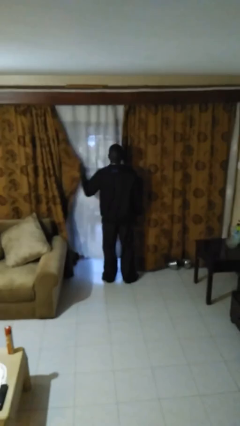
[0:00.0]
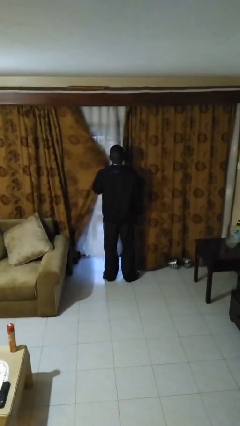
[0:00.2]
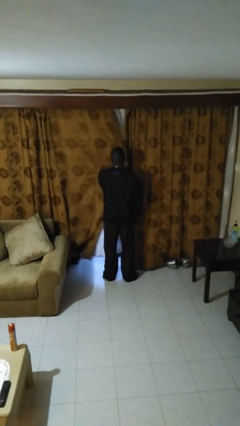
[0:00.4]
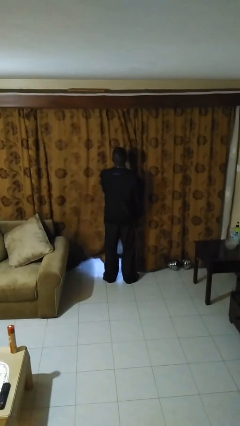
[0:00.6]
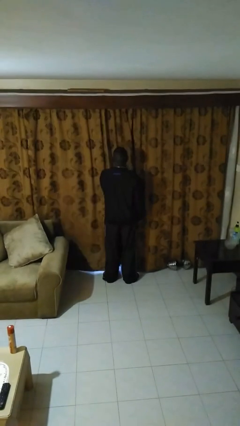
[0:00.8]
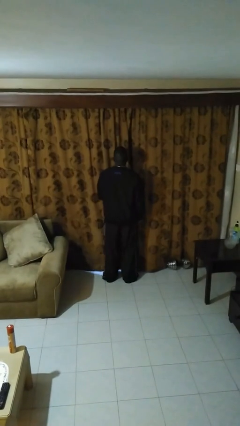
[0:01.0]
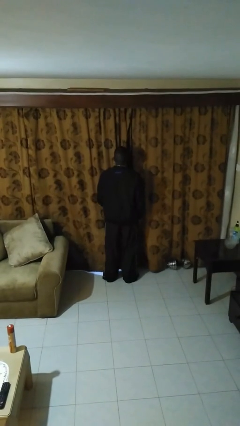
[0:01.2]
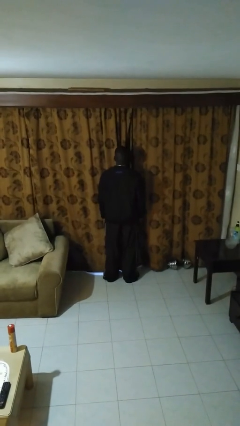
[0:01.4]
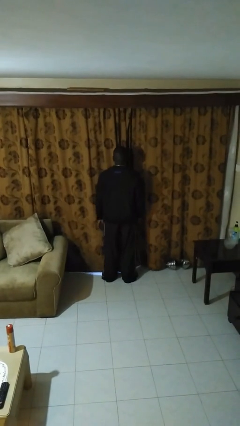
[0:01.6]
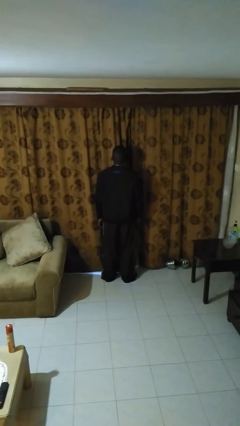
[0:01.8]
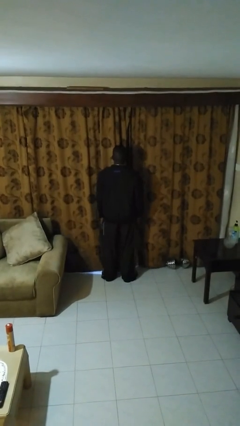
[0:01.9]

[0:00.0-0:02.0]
person closes curtains

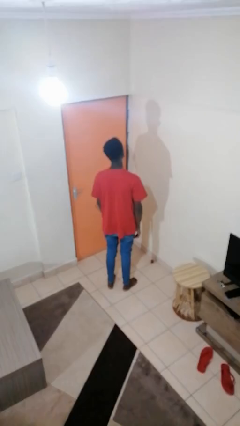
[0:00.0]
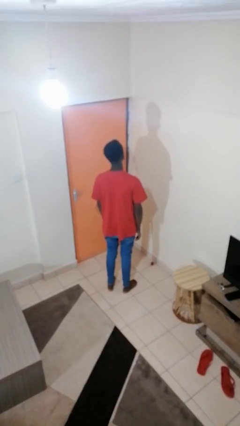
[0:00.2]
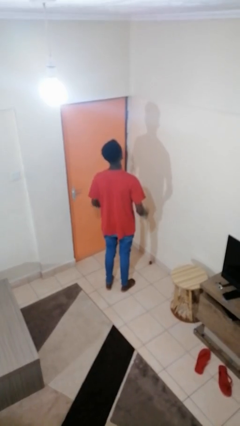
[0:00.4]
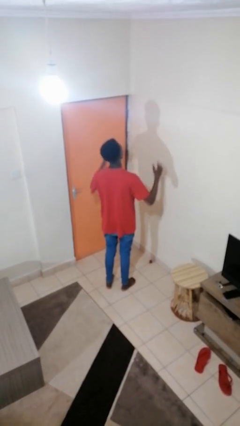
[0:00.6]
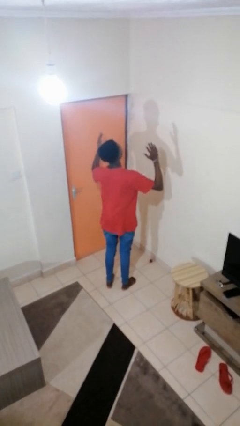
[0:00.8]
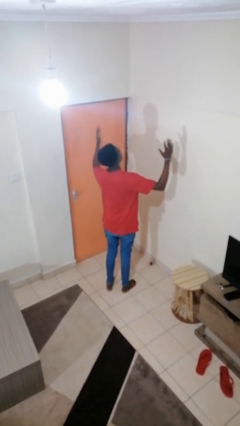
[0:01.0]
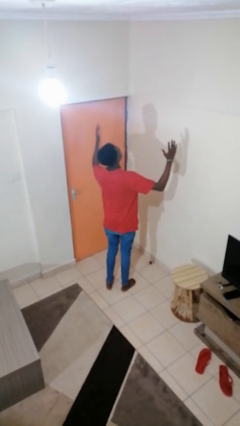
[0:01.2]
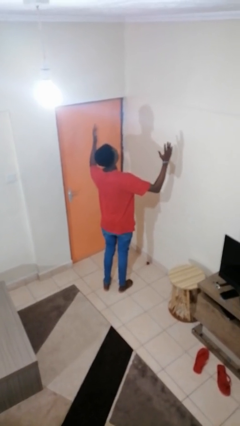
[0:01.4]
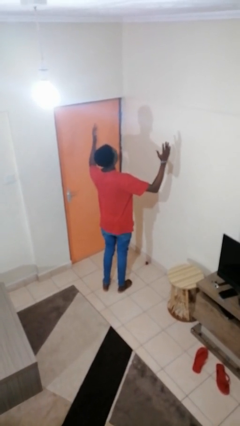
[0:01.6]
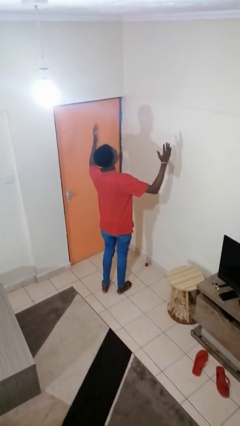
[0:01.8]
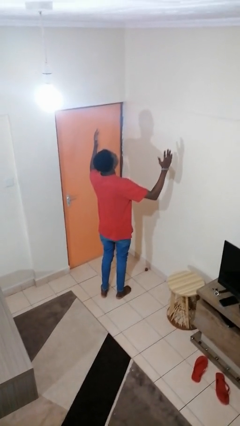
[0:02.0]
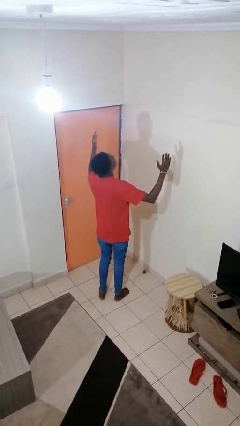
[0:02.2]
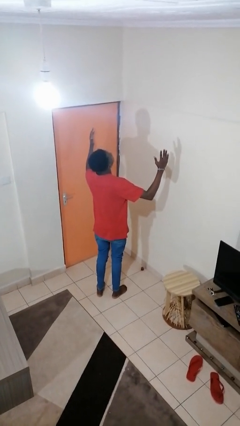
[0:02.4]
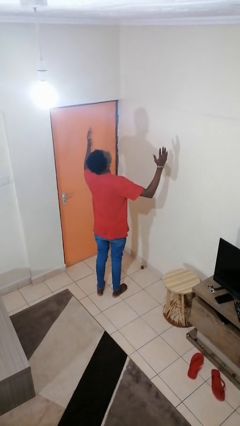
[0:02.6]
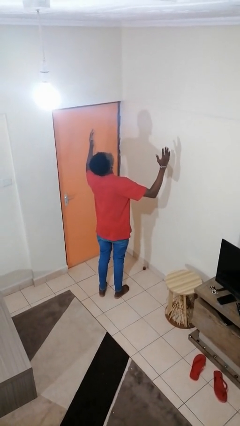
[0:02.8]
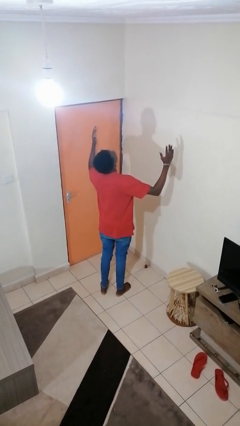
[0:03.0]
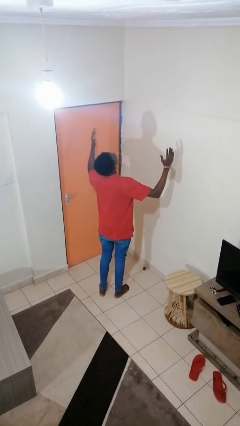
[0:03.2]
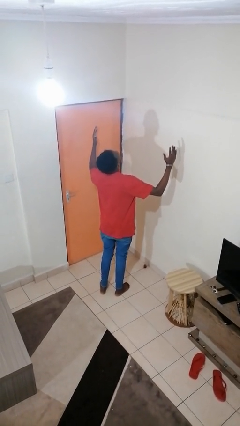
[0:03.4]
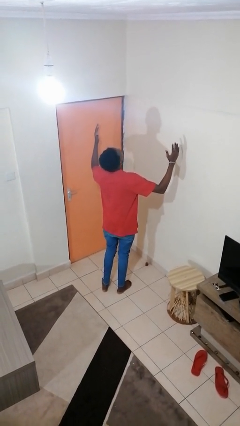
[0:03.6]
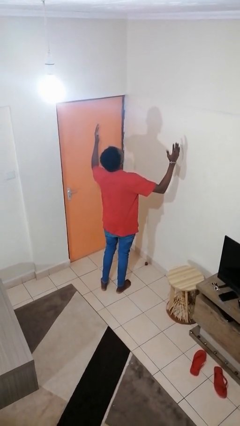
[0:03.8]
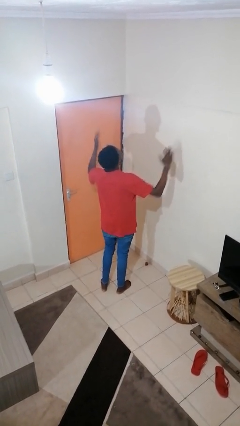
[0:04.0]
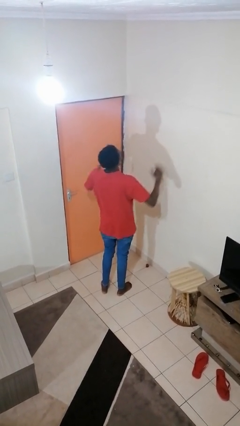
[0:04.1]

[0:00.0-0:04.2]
person prays

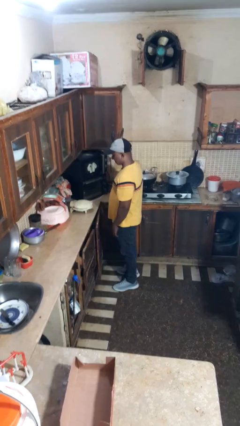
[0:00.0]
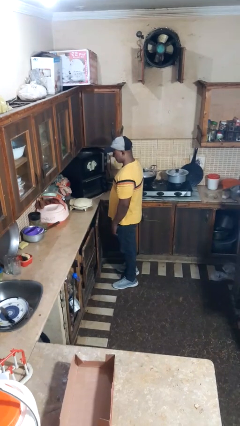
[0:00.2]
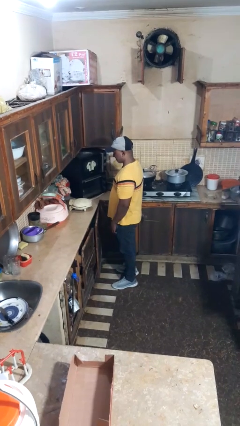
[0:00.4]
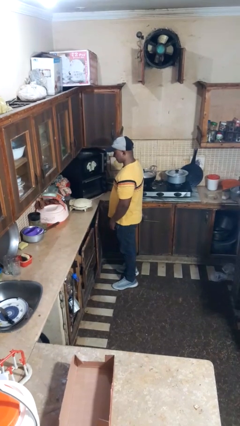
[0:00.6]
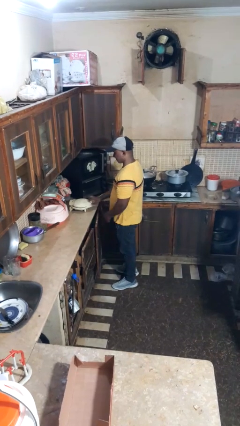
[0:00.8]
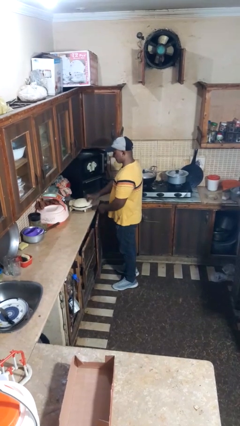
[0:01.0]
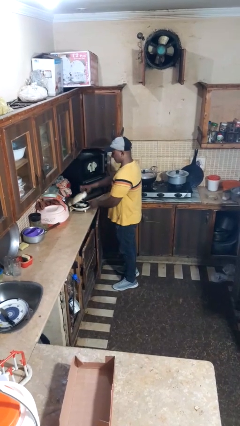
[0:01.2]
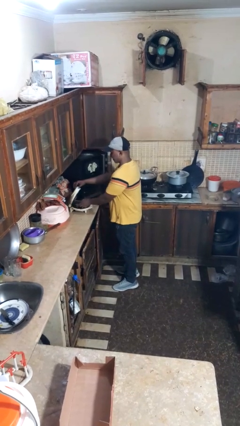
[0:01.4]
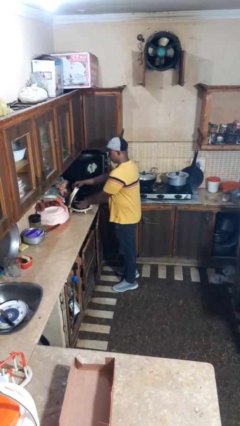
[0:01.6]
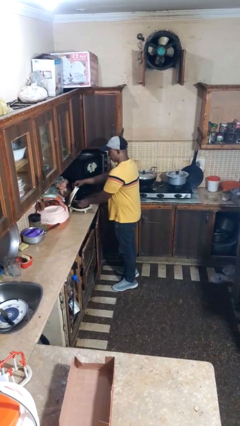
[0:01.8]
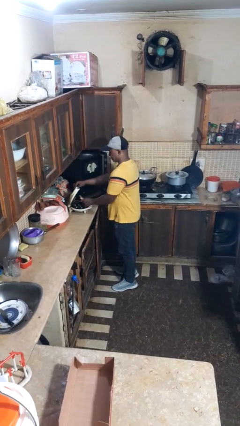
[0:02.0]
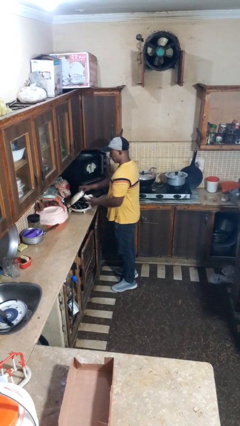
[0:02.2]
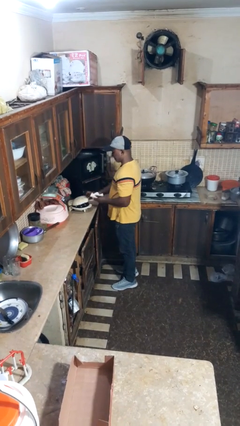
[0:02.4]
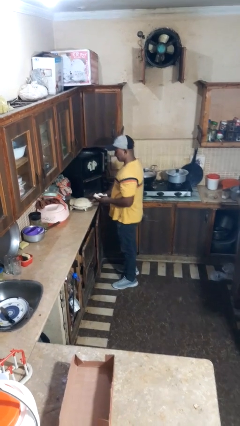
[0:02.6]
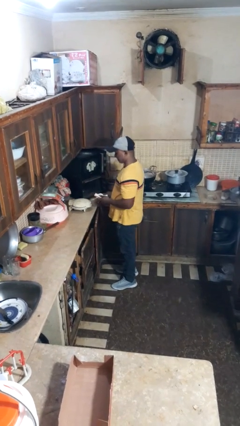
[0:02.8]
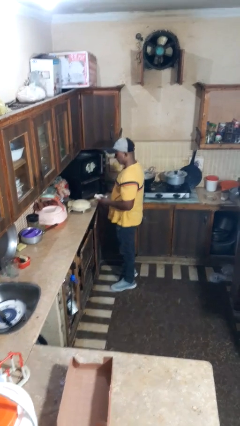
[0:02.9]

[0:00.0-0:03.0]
person takes object from toaster

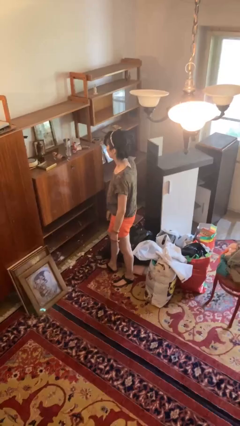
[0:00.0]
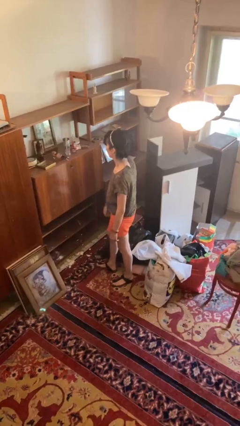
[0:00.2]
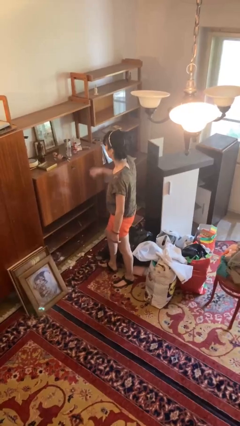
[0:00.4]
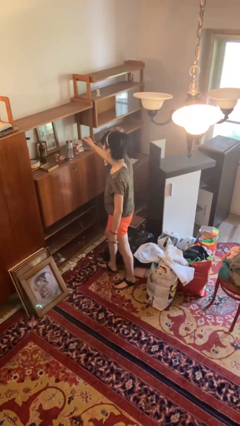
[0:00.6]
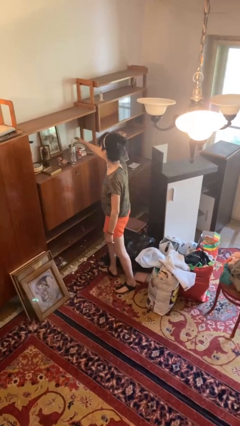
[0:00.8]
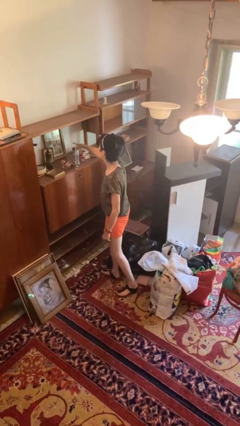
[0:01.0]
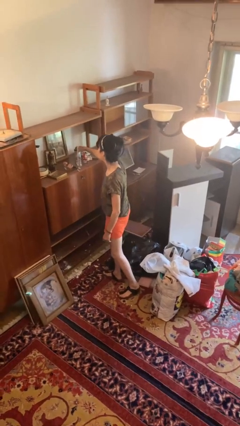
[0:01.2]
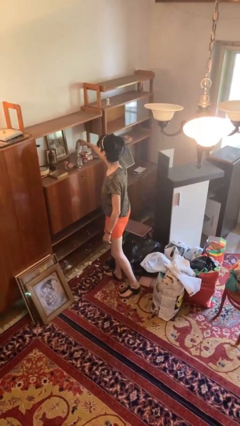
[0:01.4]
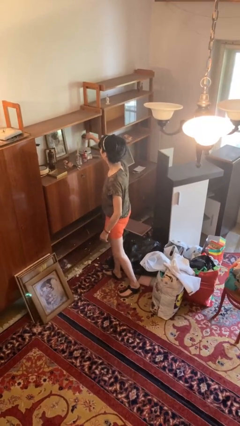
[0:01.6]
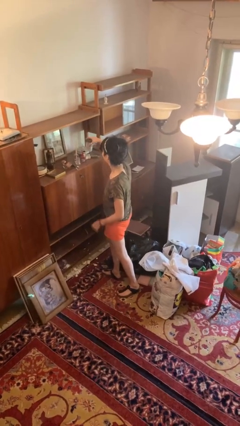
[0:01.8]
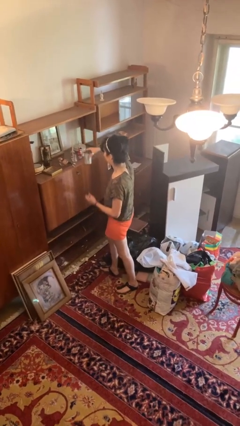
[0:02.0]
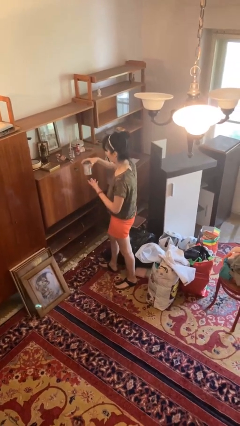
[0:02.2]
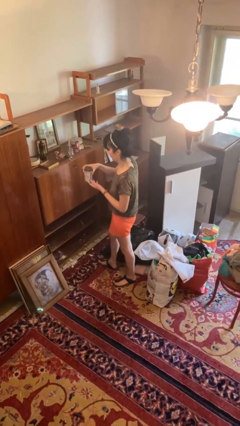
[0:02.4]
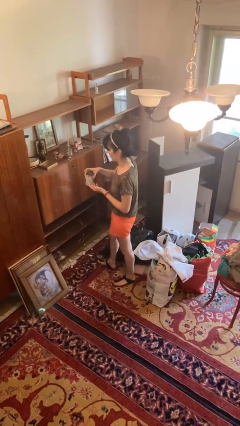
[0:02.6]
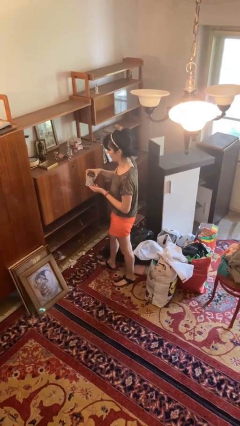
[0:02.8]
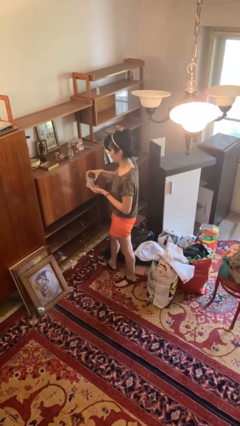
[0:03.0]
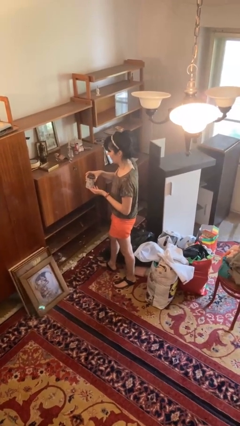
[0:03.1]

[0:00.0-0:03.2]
person picks up object from countertop

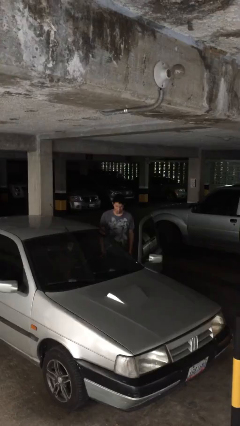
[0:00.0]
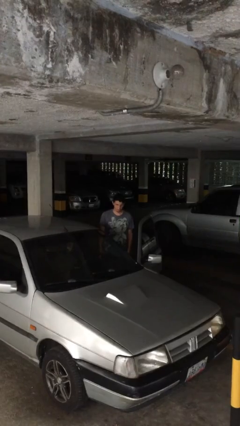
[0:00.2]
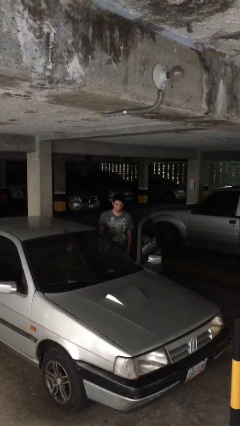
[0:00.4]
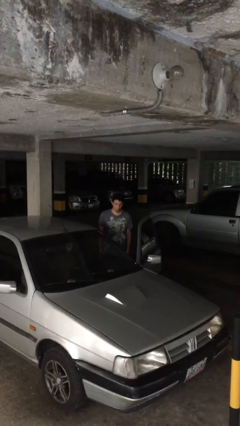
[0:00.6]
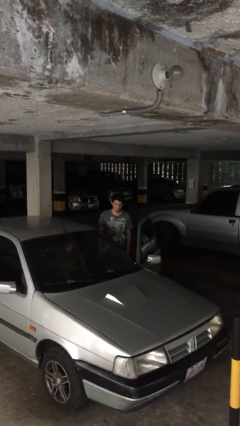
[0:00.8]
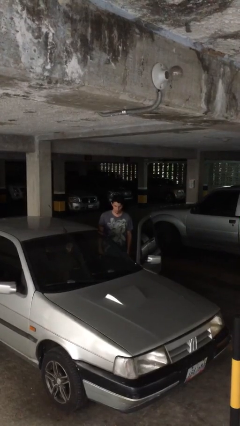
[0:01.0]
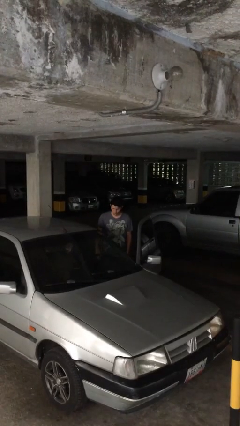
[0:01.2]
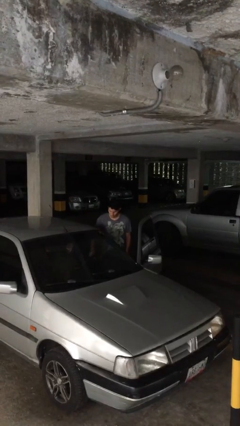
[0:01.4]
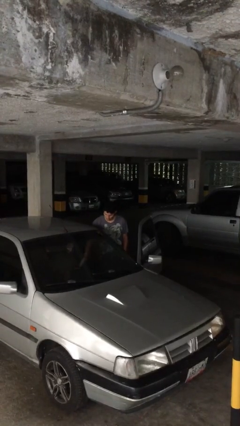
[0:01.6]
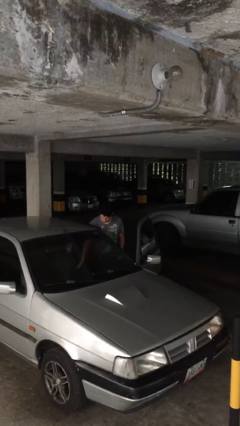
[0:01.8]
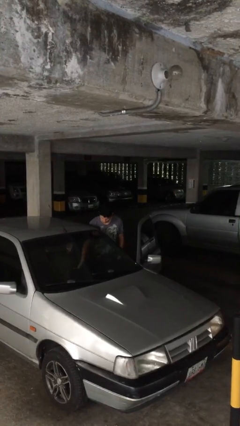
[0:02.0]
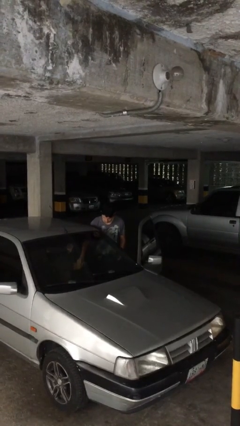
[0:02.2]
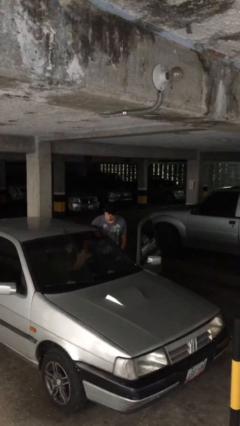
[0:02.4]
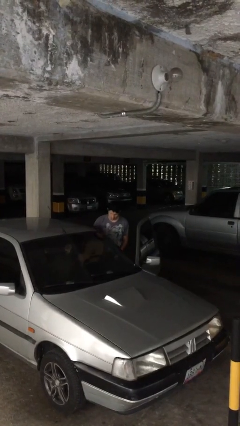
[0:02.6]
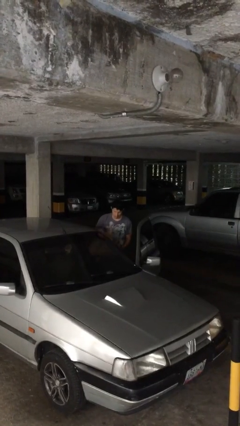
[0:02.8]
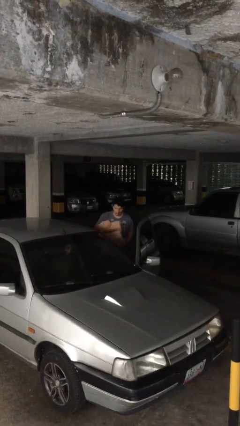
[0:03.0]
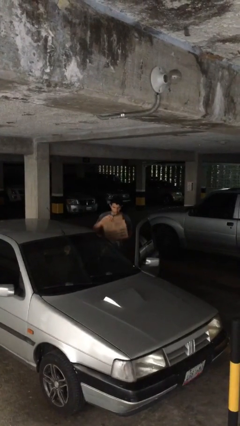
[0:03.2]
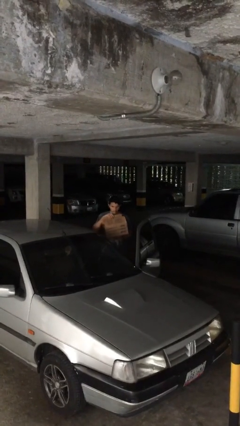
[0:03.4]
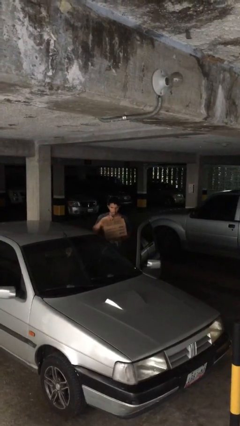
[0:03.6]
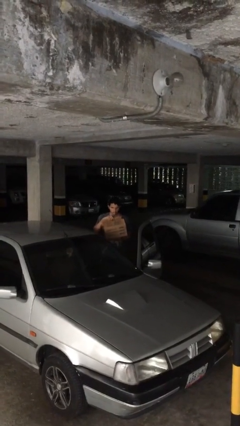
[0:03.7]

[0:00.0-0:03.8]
person unloads car

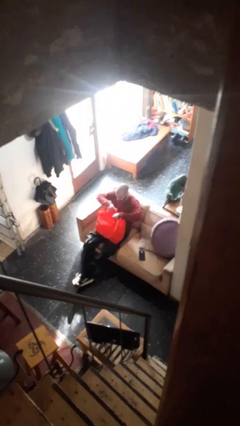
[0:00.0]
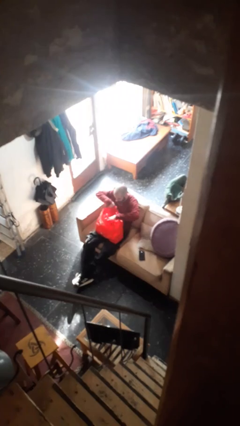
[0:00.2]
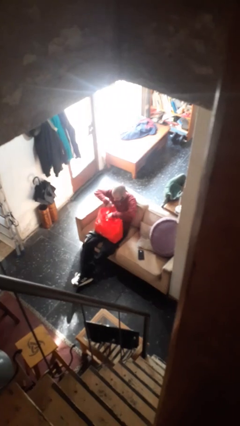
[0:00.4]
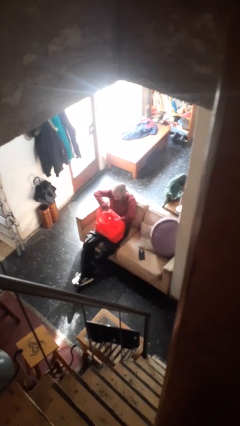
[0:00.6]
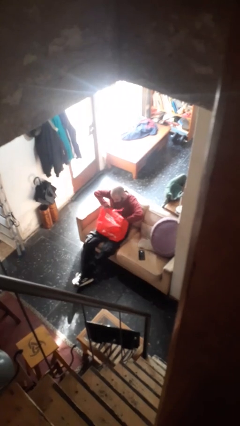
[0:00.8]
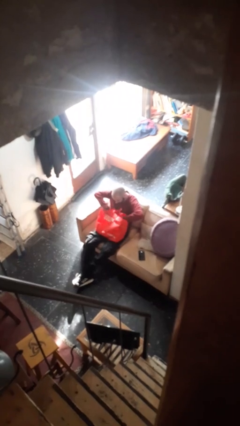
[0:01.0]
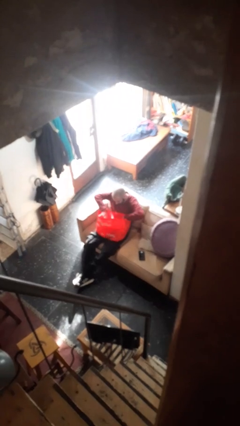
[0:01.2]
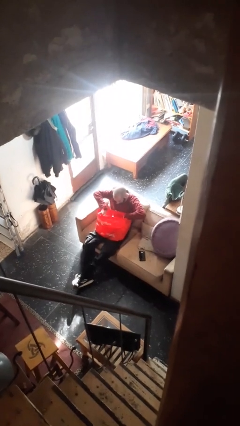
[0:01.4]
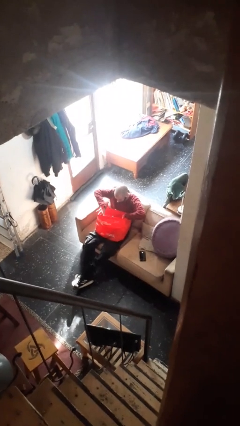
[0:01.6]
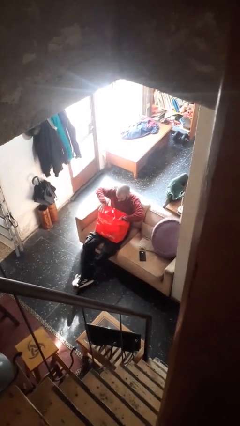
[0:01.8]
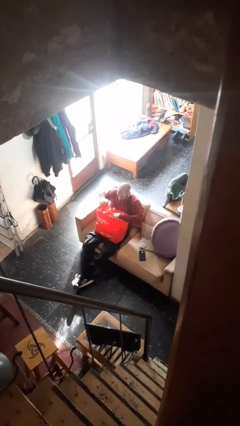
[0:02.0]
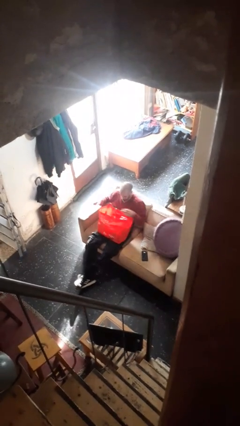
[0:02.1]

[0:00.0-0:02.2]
person searches in bag
